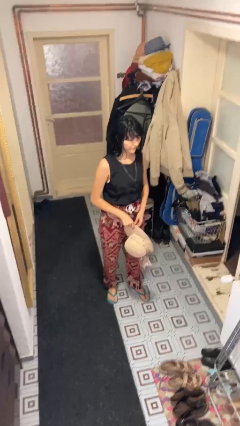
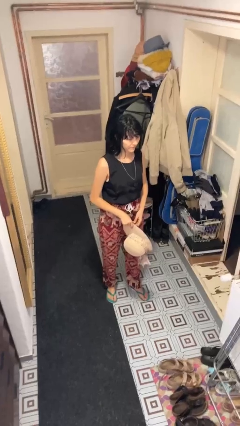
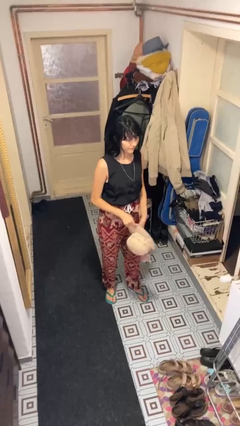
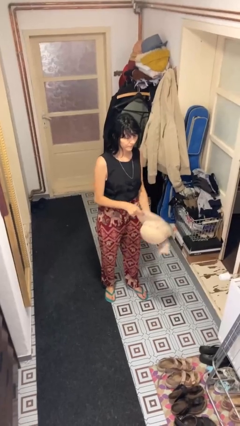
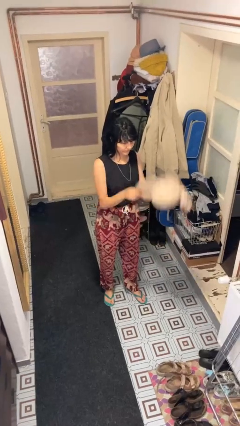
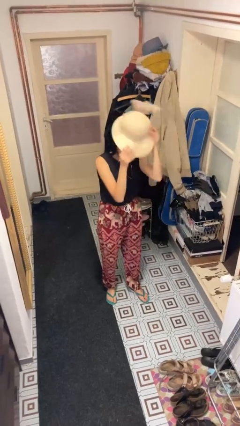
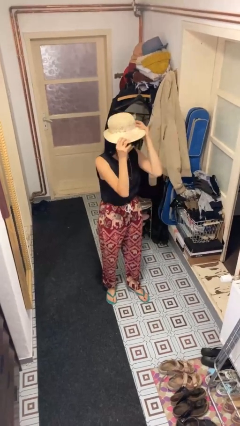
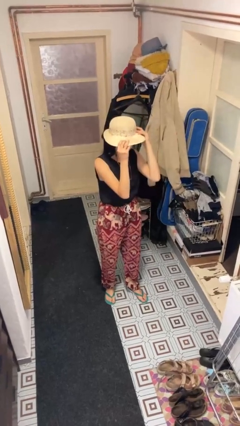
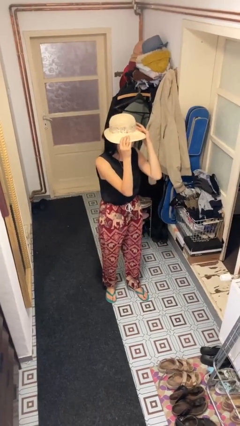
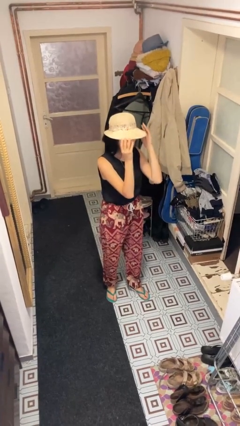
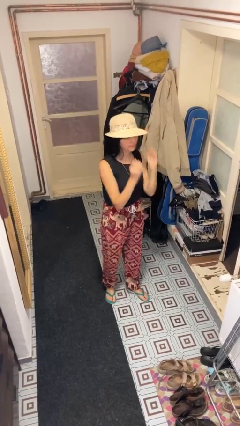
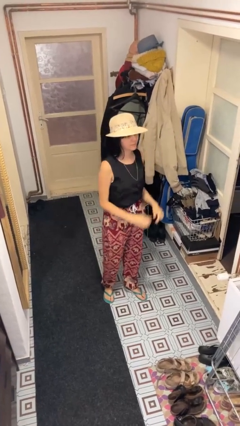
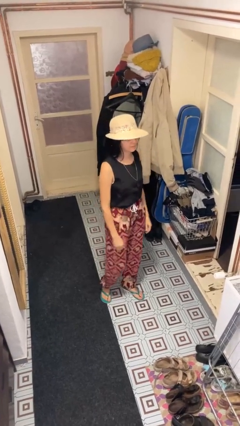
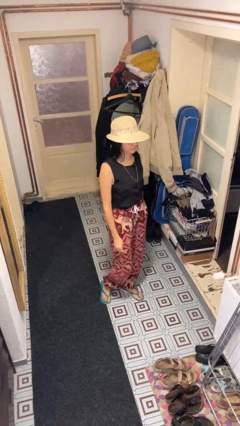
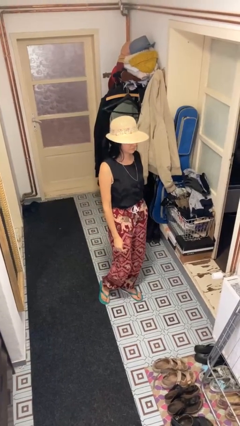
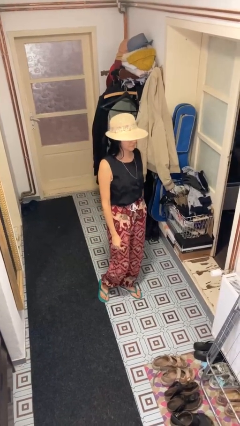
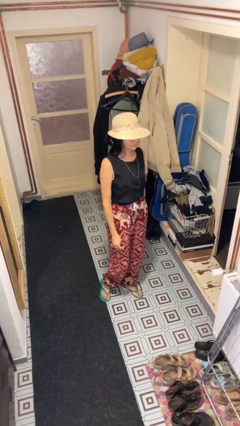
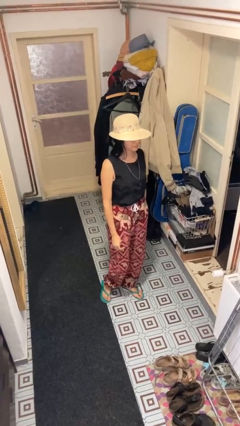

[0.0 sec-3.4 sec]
person puts on hat

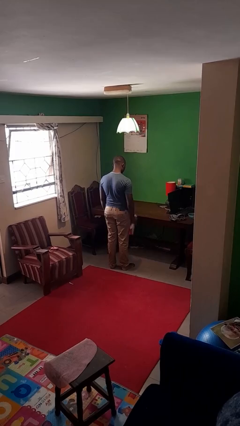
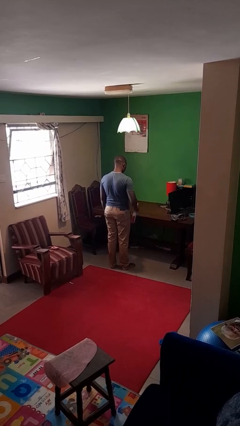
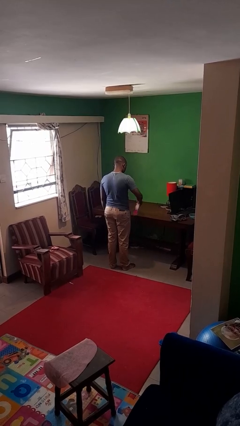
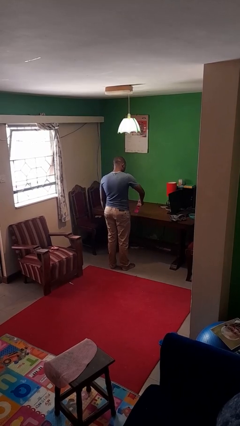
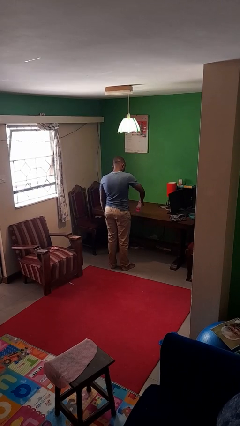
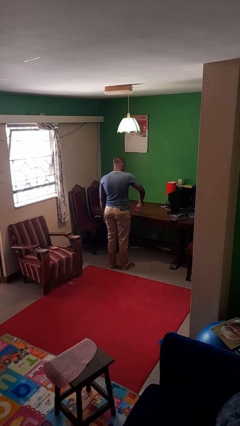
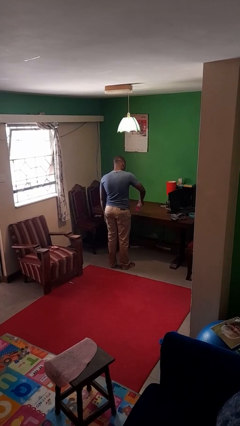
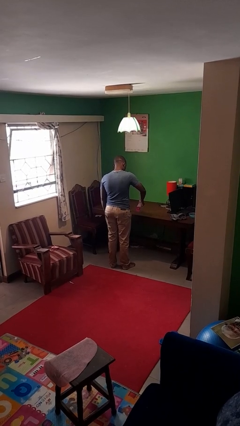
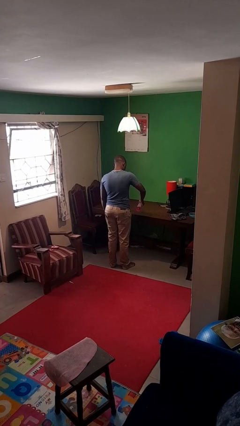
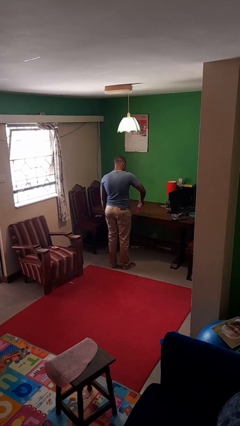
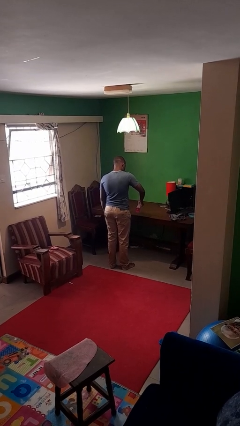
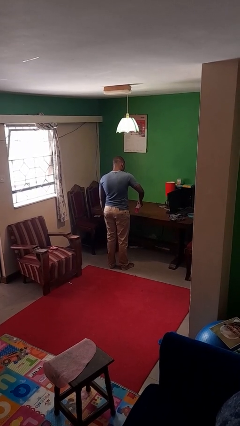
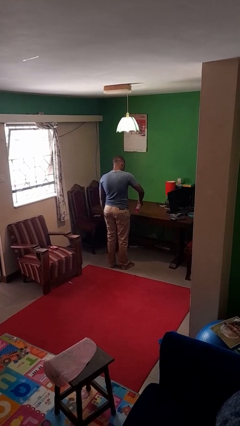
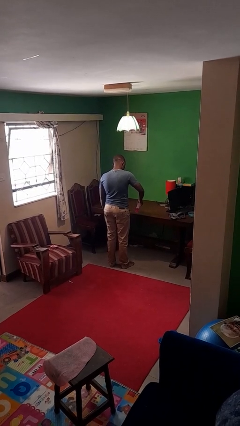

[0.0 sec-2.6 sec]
person sprays from bottle

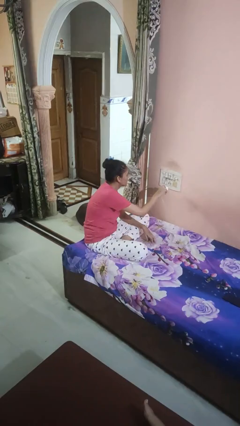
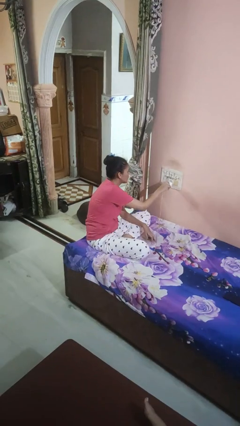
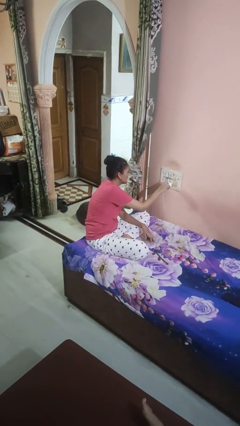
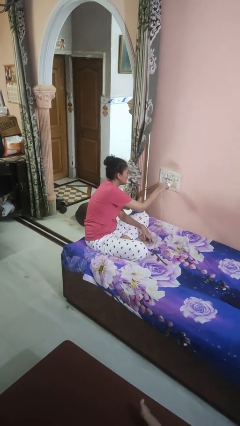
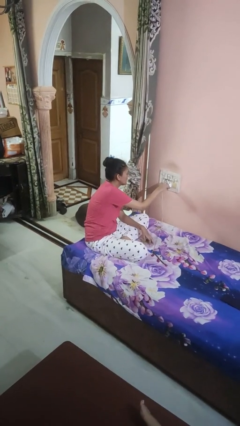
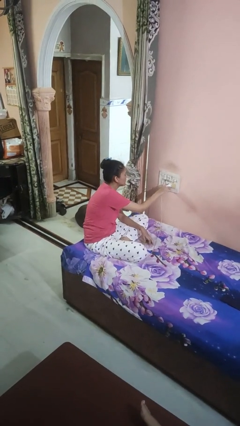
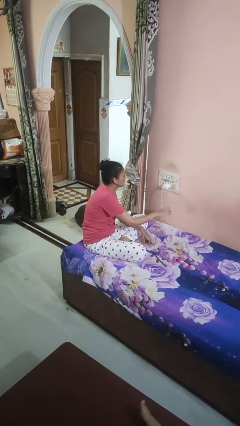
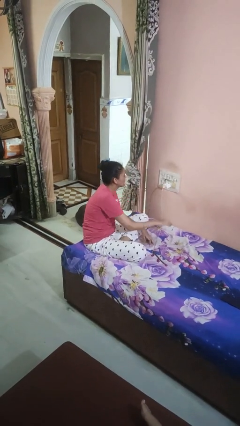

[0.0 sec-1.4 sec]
person plugs into electrical socket

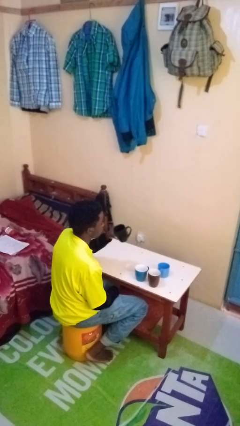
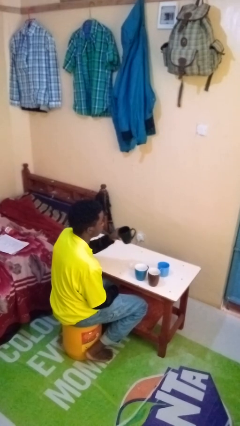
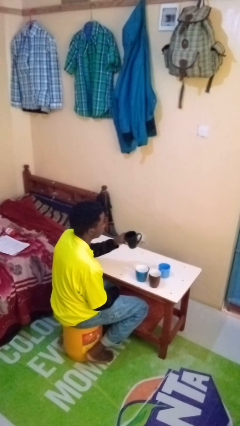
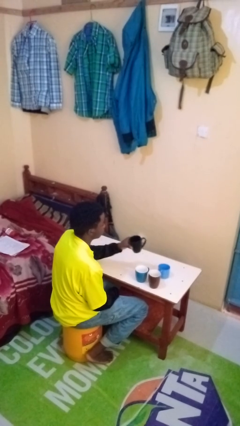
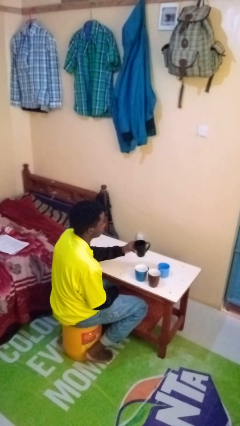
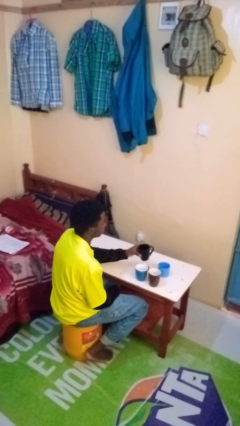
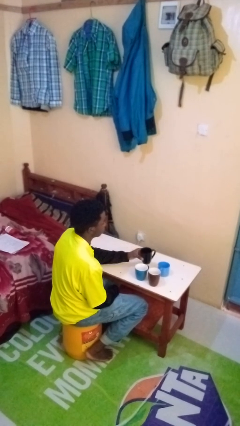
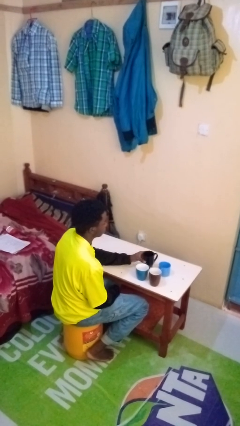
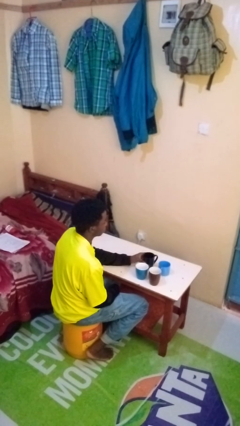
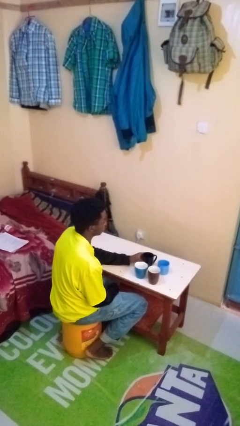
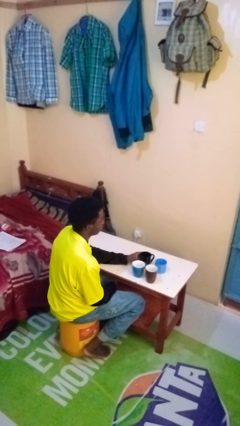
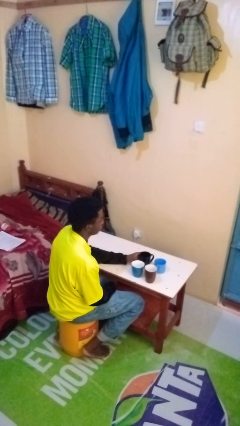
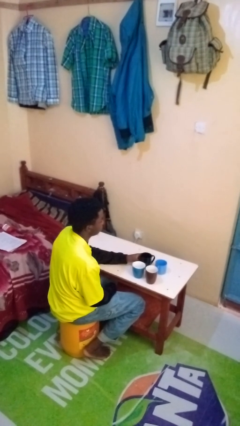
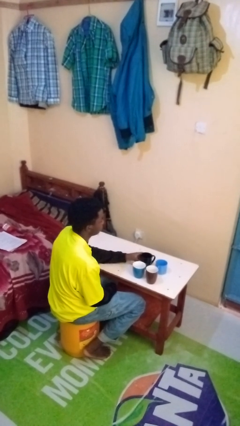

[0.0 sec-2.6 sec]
person puts down object on table

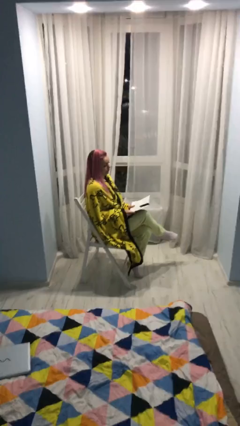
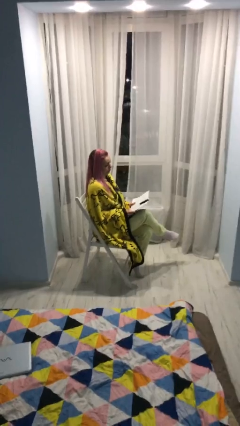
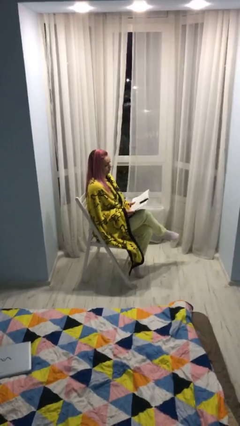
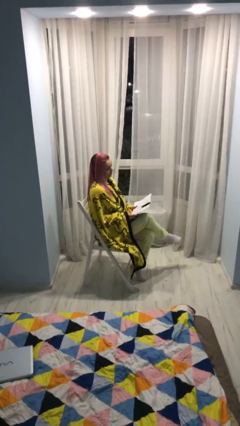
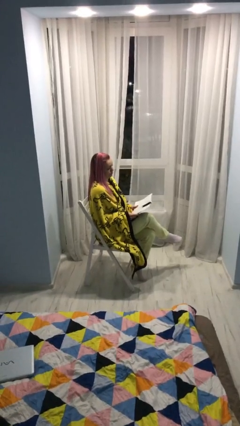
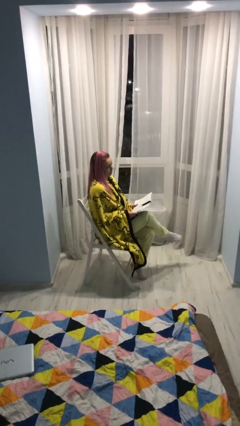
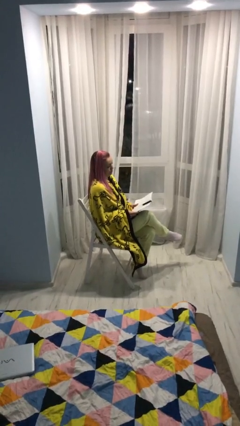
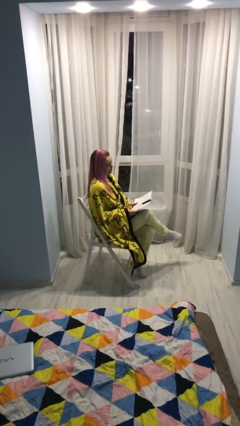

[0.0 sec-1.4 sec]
person reads document

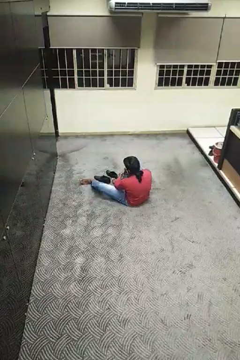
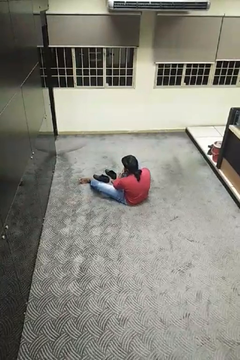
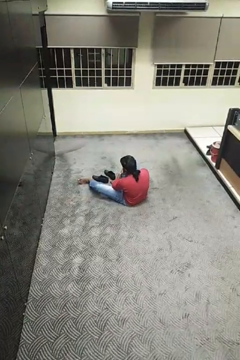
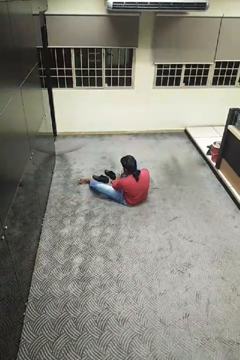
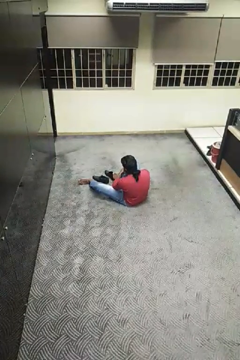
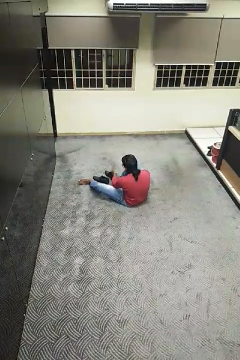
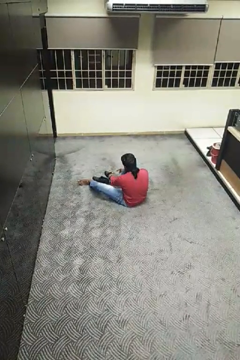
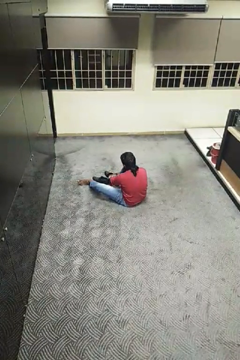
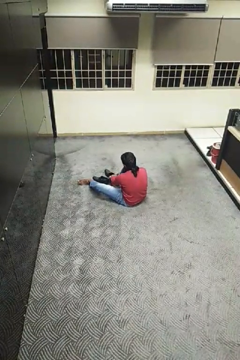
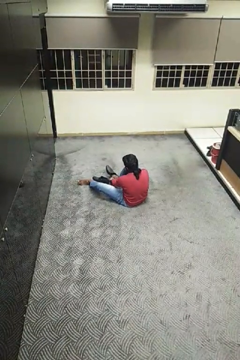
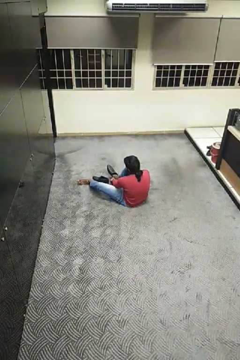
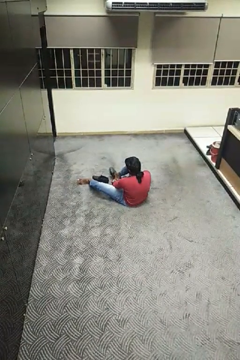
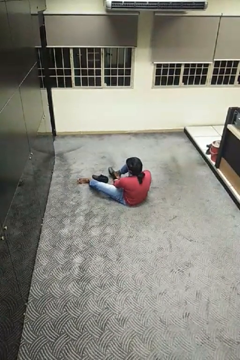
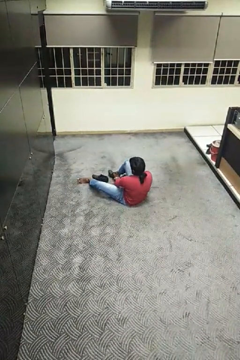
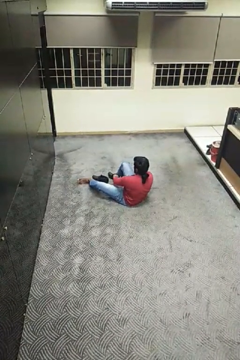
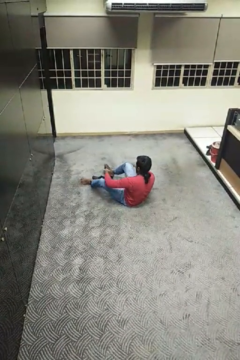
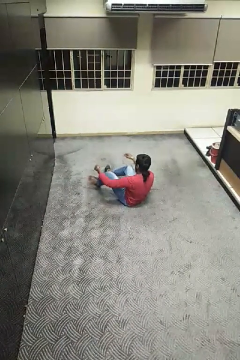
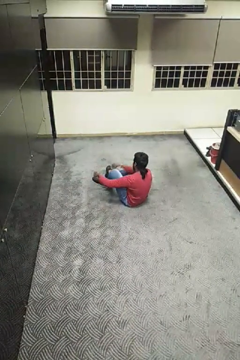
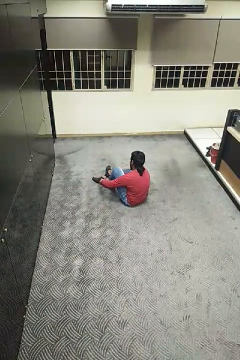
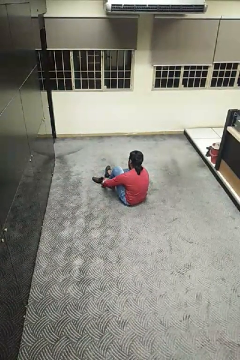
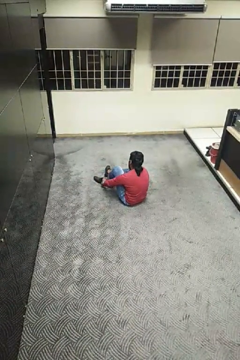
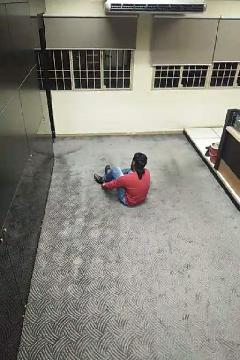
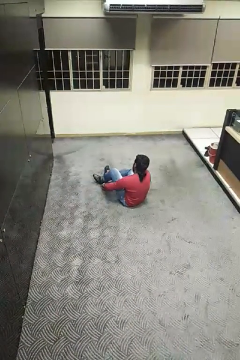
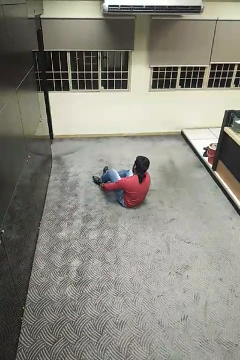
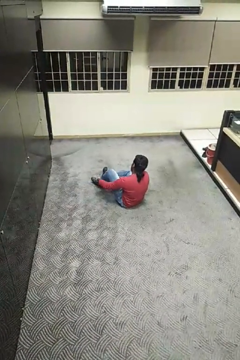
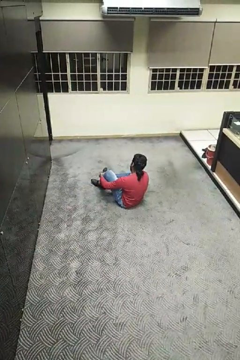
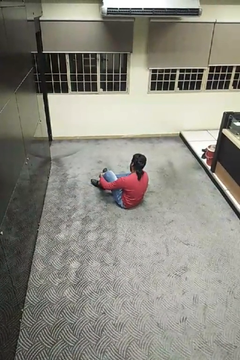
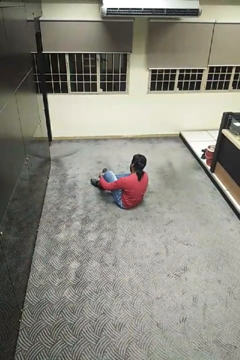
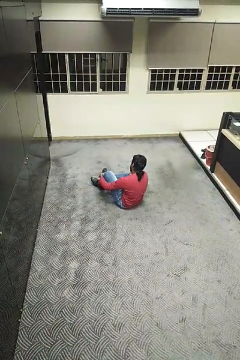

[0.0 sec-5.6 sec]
person puts on shoes

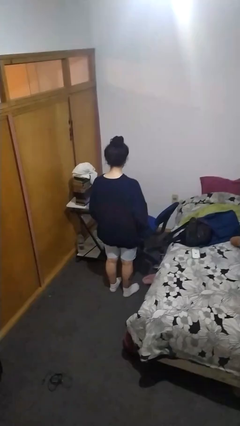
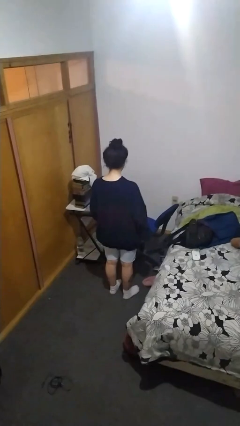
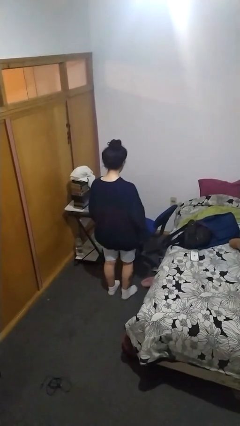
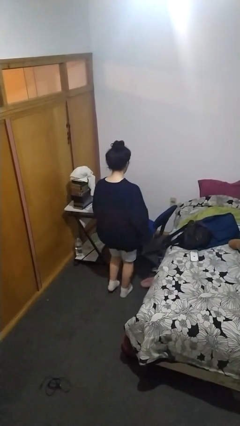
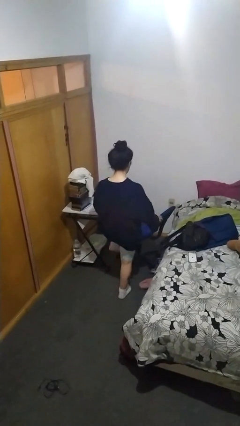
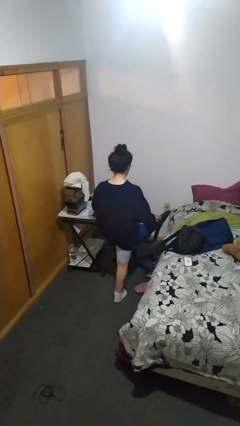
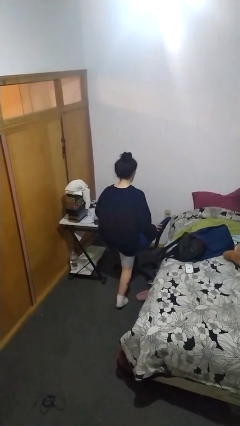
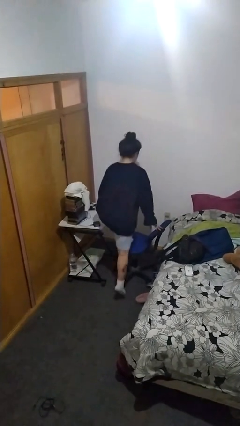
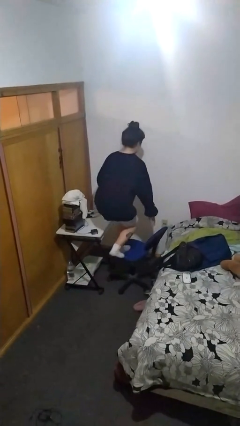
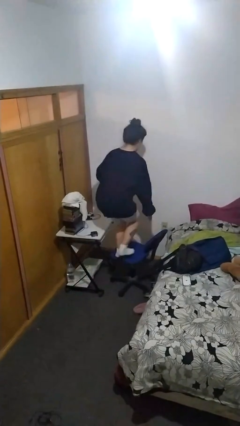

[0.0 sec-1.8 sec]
person climbs on chair
